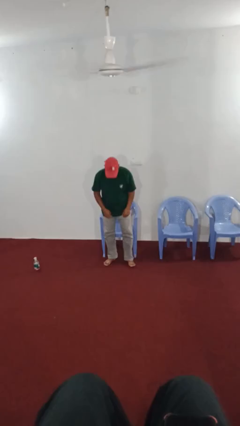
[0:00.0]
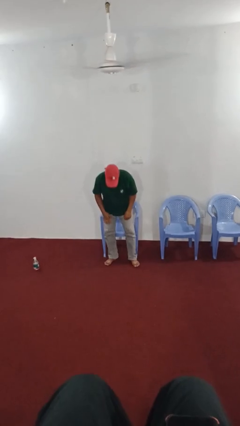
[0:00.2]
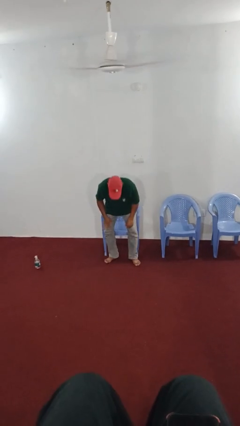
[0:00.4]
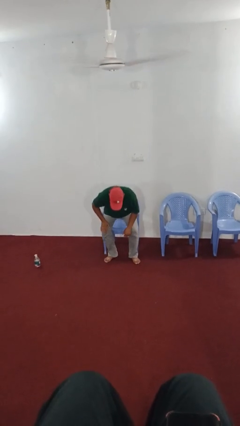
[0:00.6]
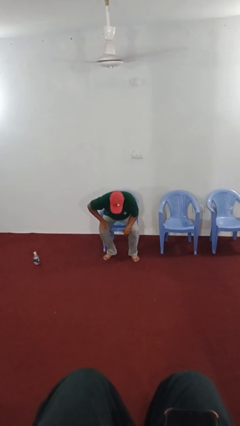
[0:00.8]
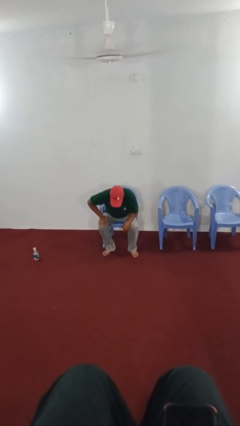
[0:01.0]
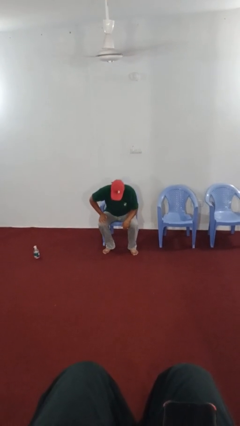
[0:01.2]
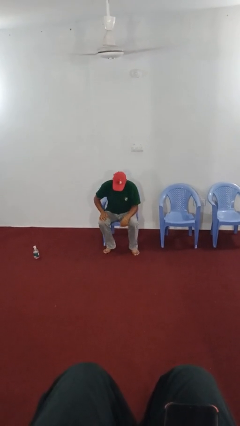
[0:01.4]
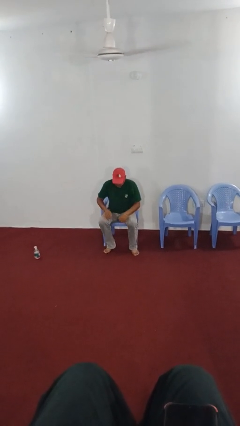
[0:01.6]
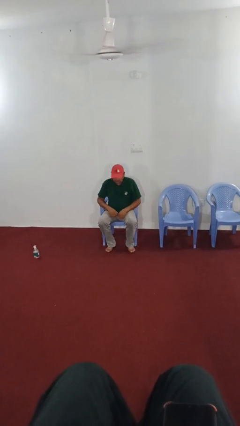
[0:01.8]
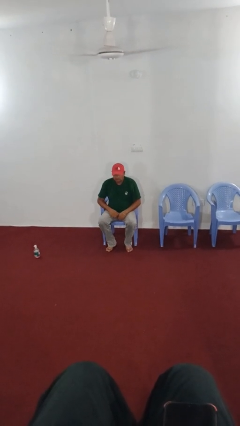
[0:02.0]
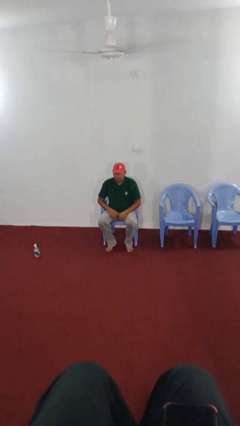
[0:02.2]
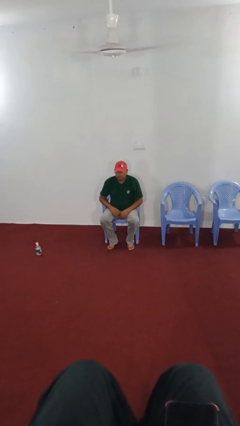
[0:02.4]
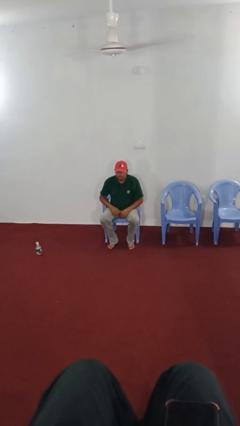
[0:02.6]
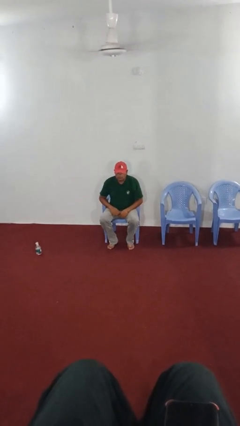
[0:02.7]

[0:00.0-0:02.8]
person sits down

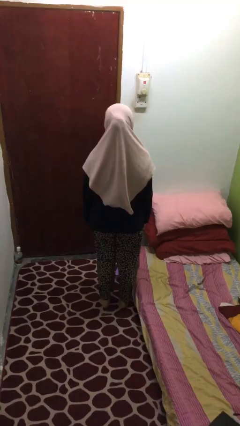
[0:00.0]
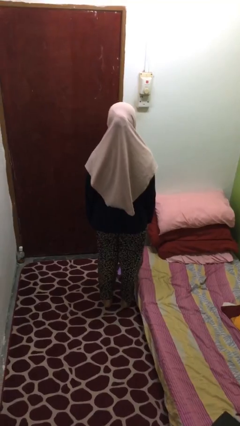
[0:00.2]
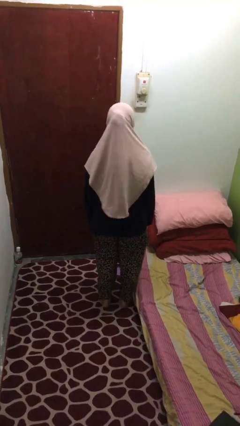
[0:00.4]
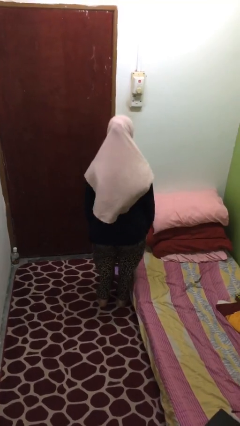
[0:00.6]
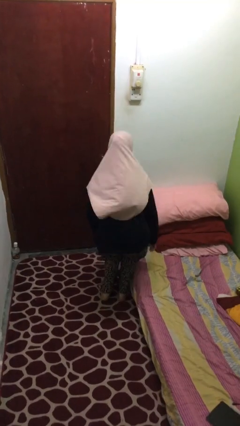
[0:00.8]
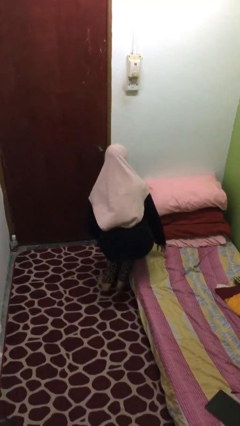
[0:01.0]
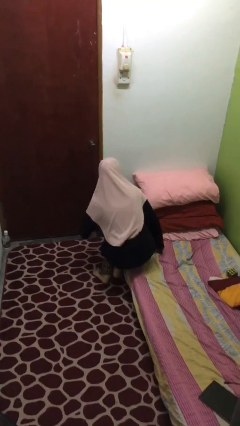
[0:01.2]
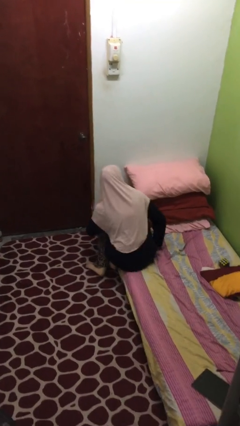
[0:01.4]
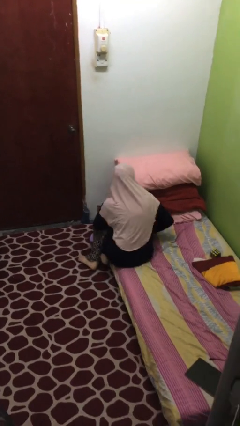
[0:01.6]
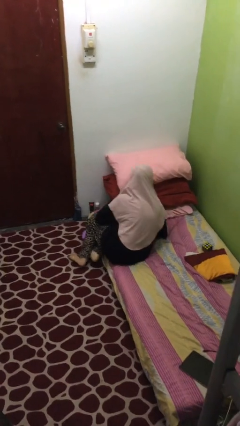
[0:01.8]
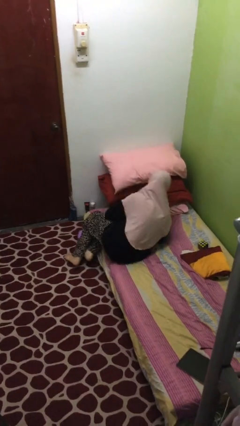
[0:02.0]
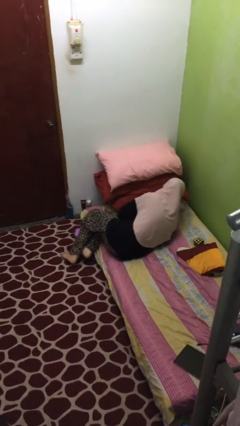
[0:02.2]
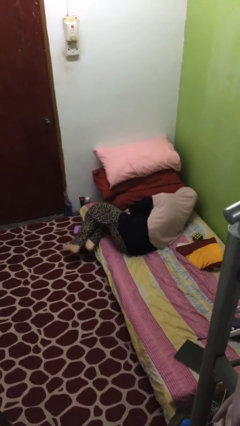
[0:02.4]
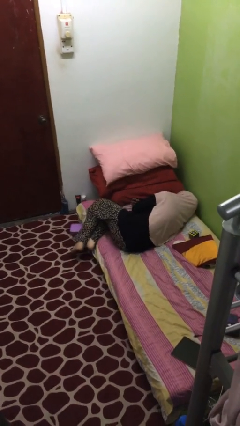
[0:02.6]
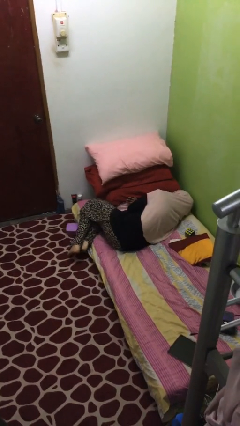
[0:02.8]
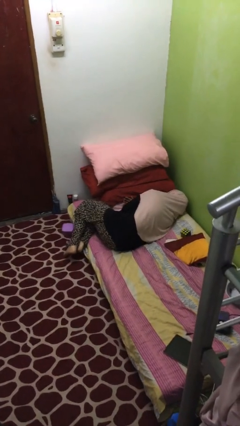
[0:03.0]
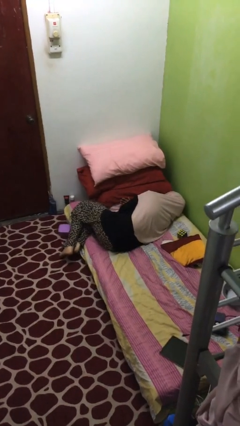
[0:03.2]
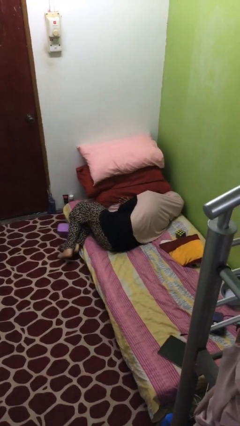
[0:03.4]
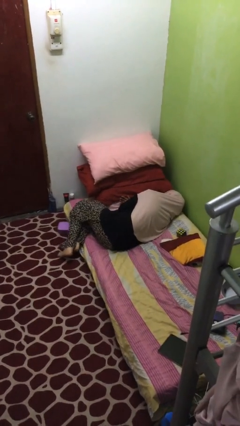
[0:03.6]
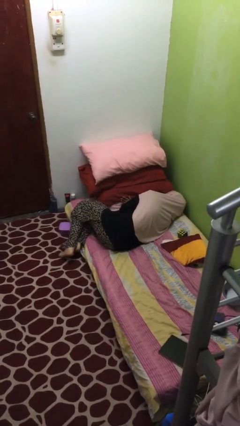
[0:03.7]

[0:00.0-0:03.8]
person lies down on bed

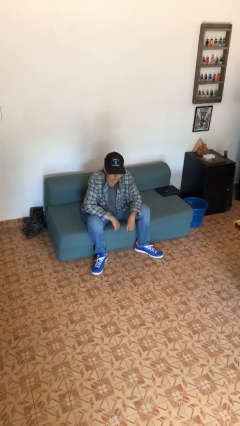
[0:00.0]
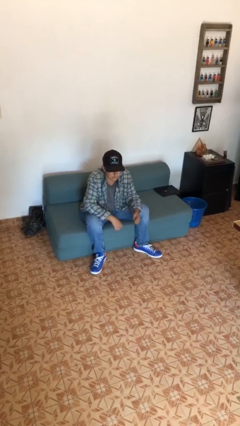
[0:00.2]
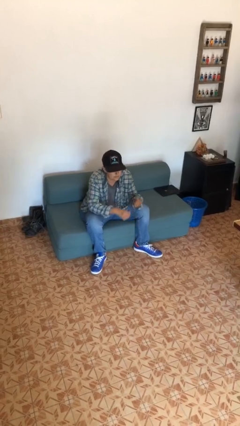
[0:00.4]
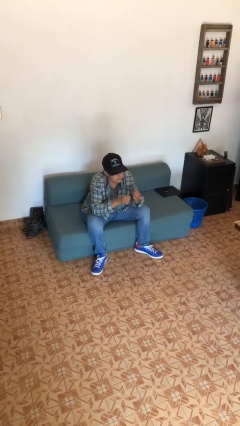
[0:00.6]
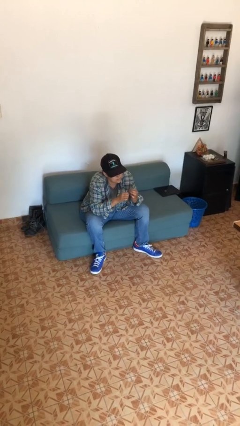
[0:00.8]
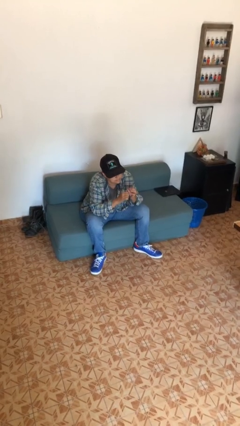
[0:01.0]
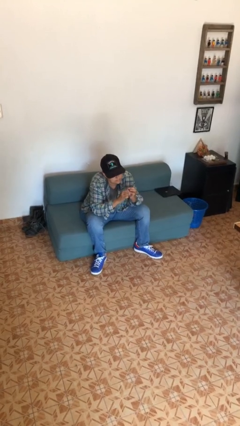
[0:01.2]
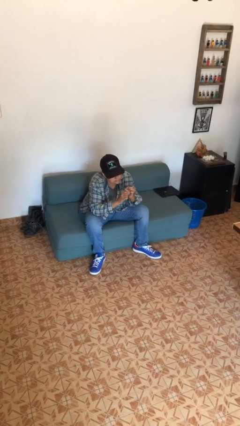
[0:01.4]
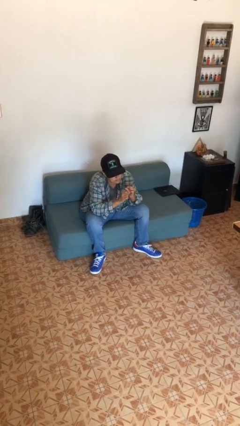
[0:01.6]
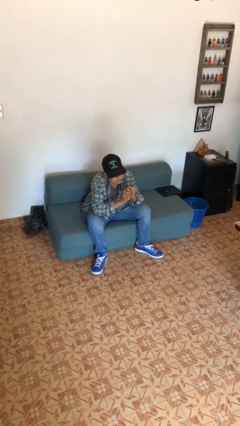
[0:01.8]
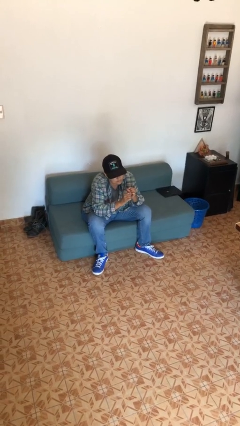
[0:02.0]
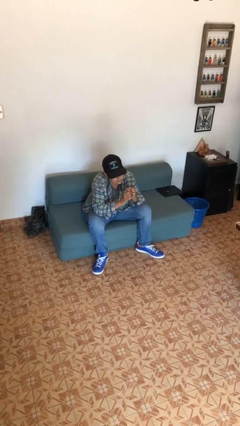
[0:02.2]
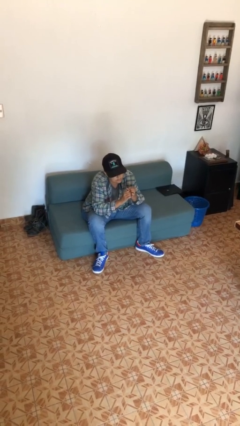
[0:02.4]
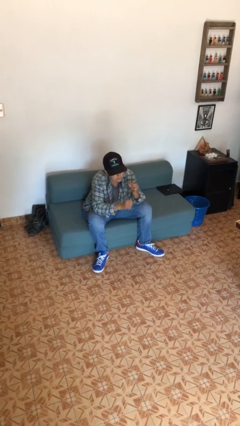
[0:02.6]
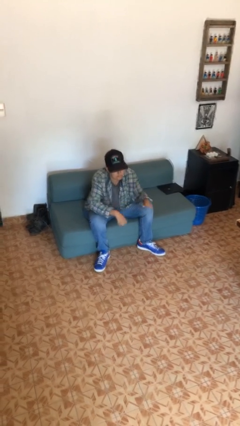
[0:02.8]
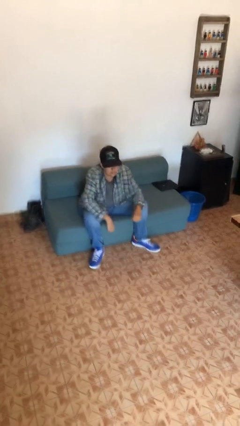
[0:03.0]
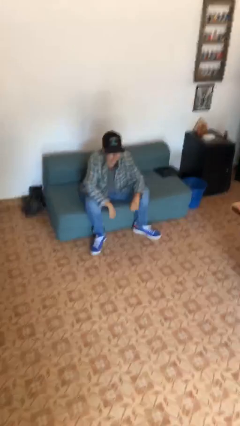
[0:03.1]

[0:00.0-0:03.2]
person files fingernails

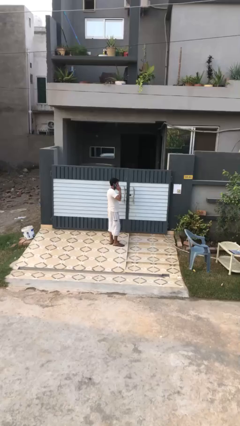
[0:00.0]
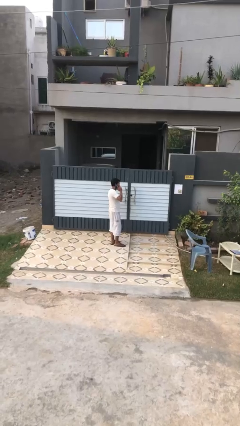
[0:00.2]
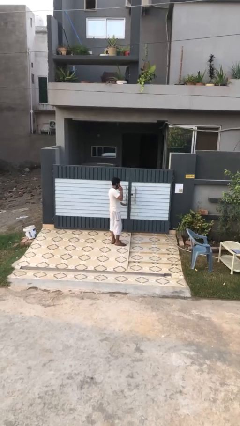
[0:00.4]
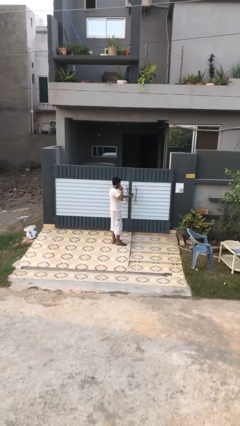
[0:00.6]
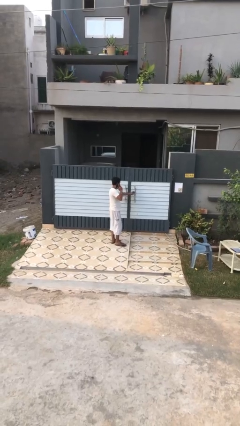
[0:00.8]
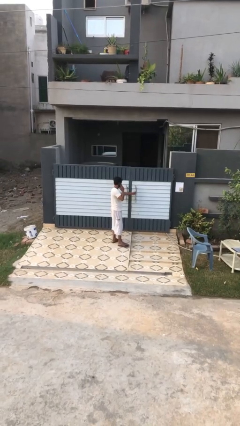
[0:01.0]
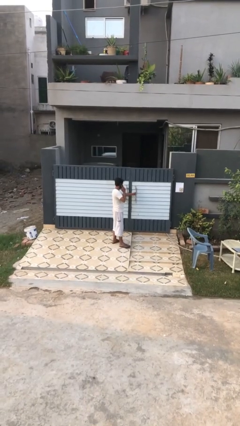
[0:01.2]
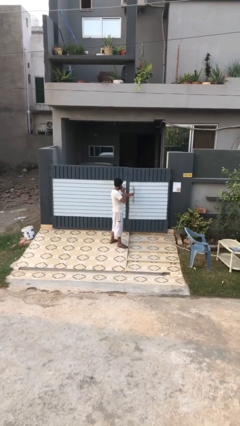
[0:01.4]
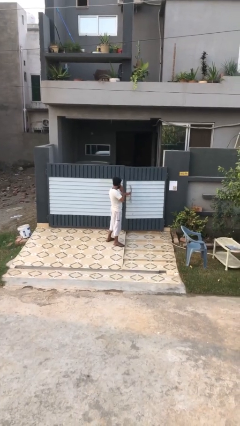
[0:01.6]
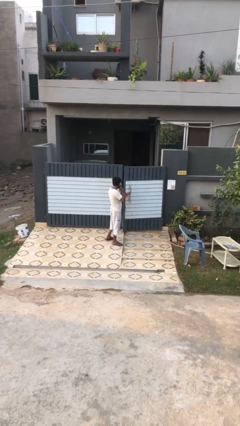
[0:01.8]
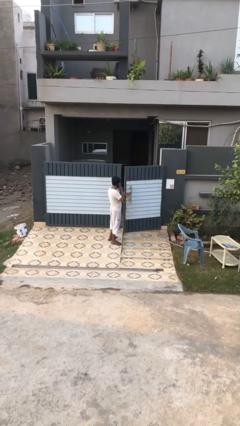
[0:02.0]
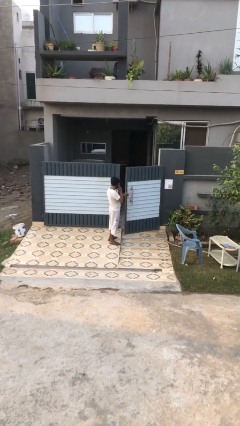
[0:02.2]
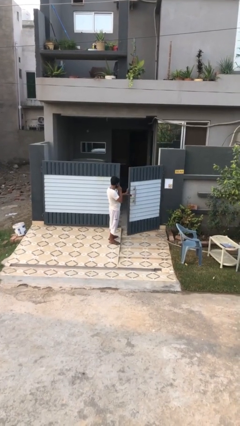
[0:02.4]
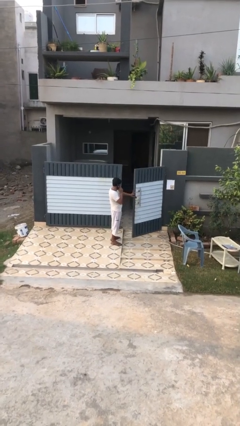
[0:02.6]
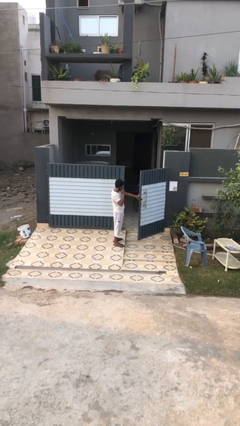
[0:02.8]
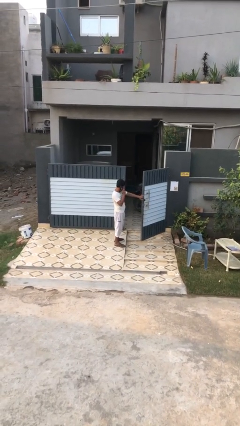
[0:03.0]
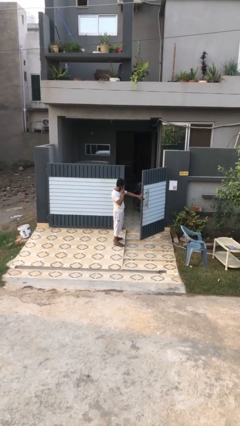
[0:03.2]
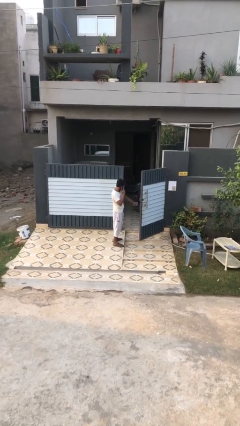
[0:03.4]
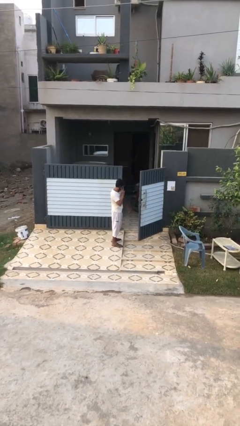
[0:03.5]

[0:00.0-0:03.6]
person opens facility door

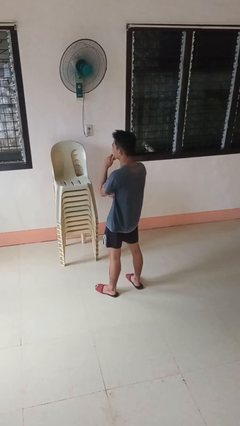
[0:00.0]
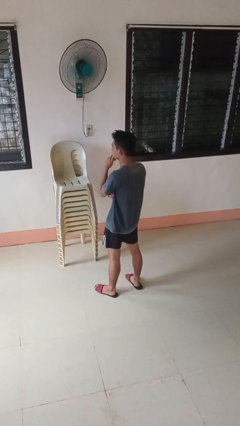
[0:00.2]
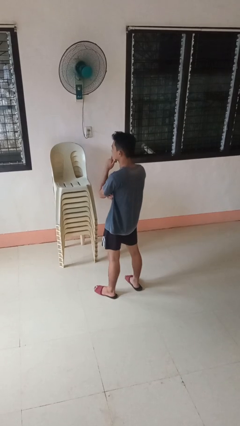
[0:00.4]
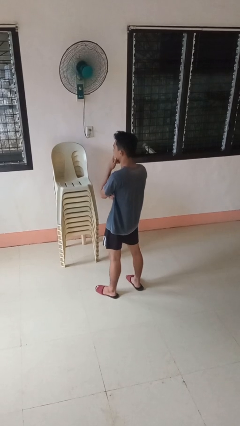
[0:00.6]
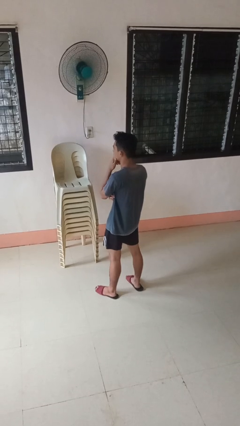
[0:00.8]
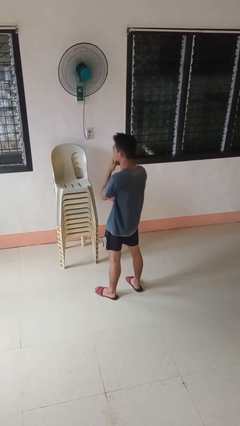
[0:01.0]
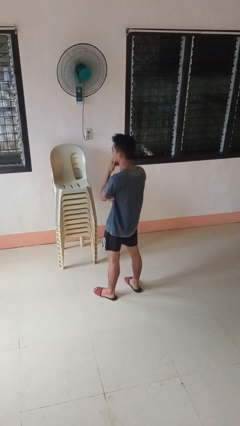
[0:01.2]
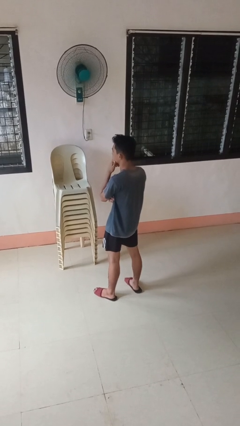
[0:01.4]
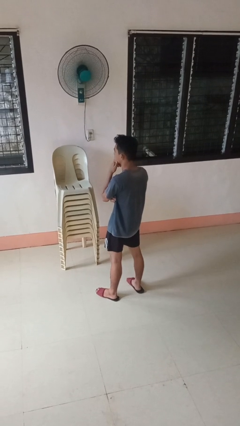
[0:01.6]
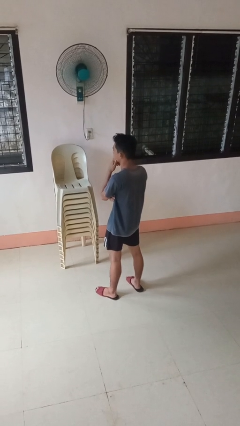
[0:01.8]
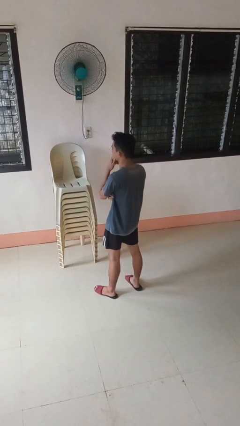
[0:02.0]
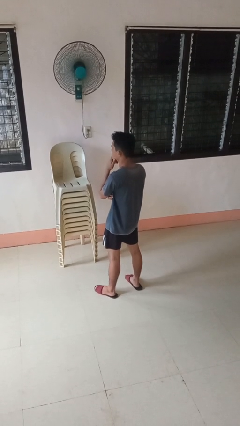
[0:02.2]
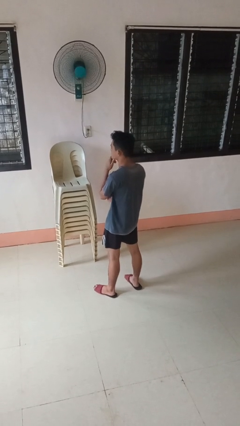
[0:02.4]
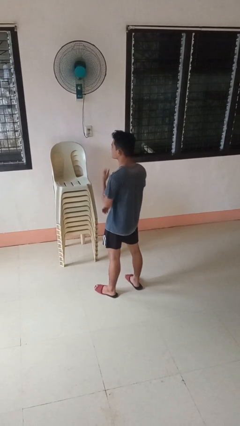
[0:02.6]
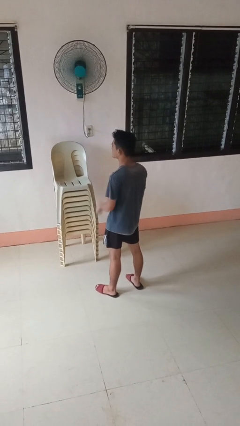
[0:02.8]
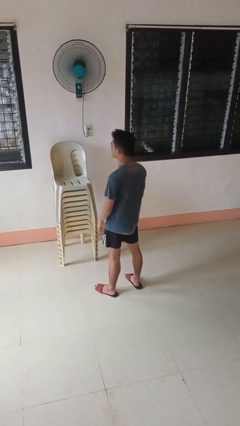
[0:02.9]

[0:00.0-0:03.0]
person strokes chin

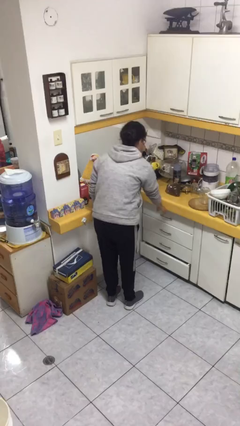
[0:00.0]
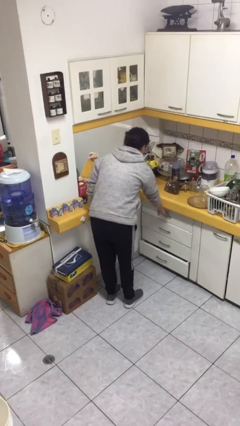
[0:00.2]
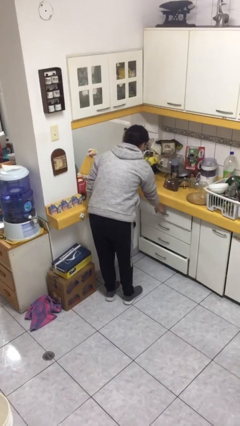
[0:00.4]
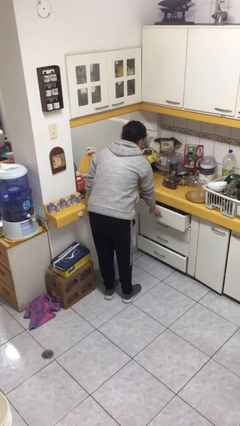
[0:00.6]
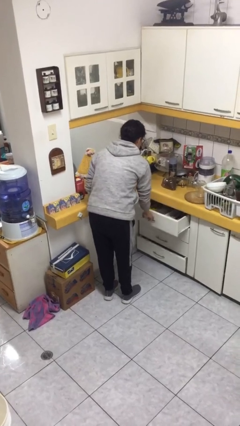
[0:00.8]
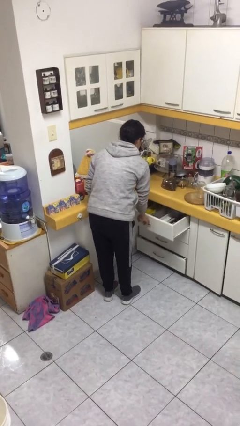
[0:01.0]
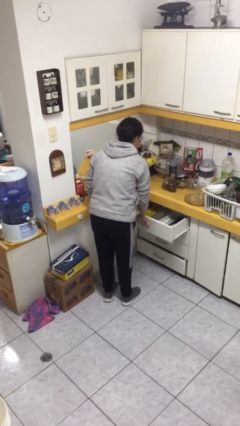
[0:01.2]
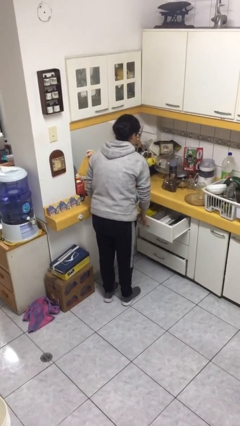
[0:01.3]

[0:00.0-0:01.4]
person opens kitchen drawer
